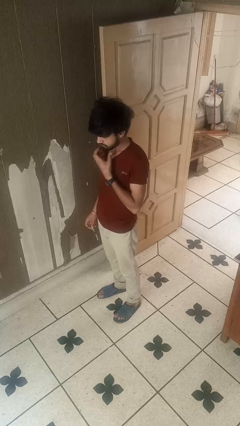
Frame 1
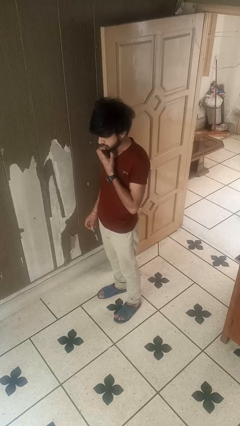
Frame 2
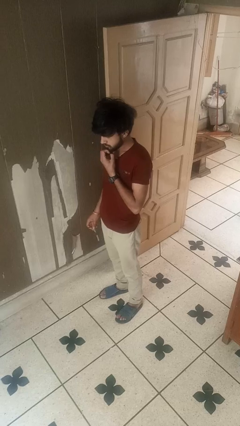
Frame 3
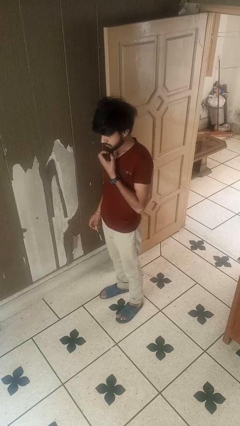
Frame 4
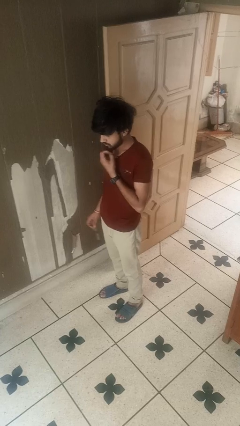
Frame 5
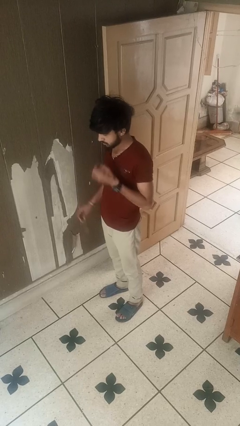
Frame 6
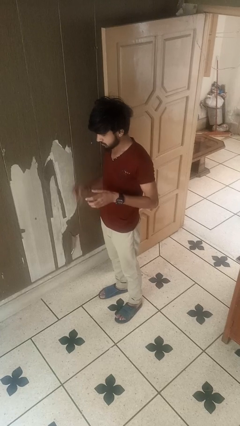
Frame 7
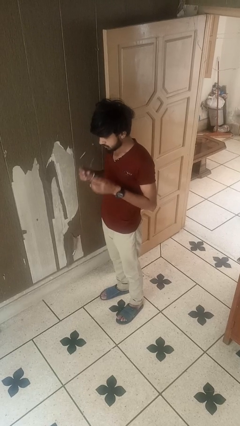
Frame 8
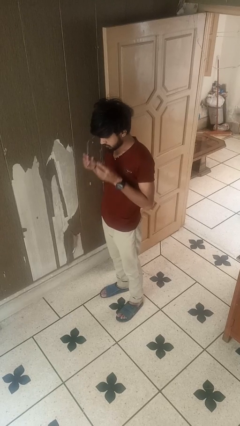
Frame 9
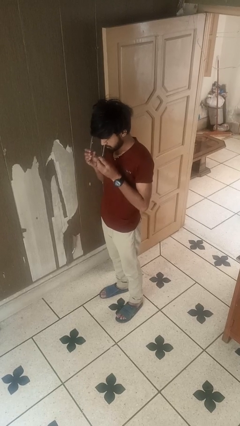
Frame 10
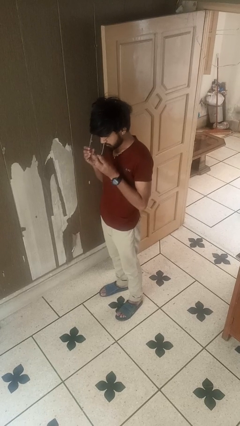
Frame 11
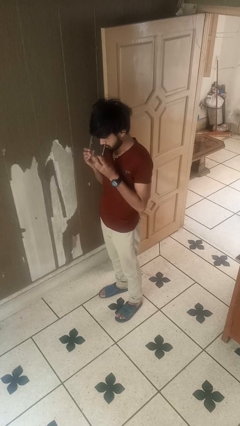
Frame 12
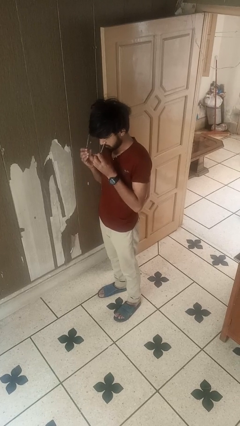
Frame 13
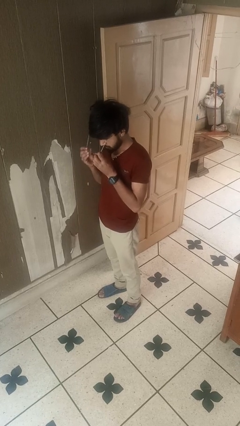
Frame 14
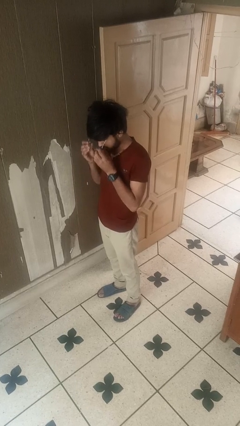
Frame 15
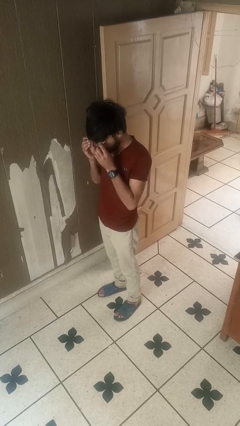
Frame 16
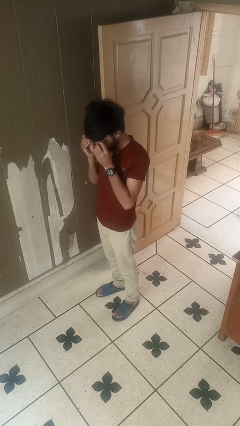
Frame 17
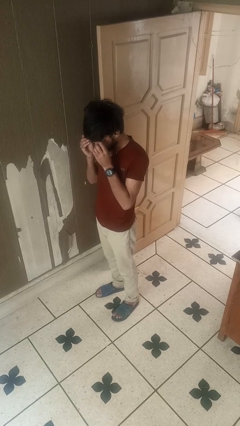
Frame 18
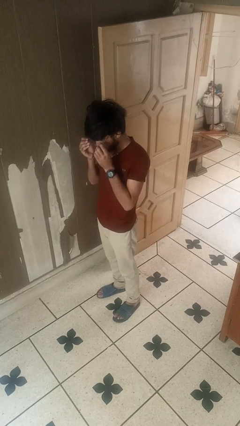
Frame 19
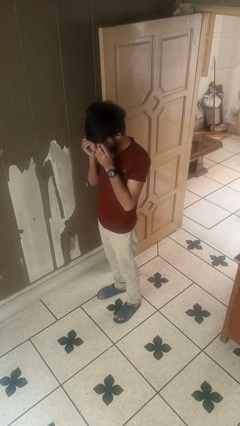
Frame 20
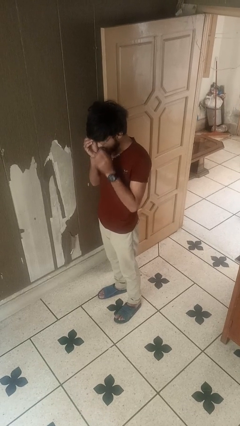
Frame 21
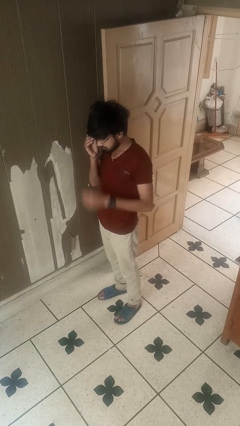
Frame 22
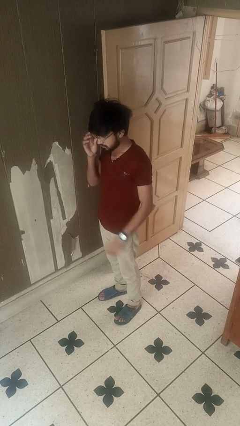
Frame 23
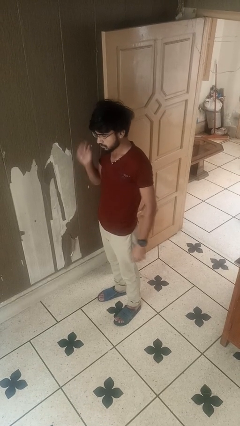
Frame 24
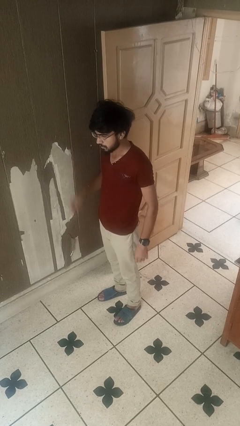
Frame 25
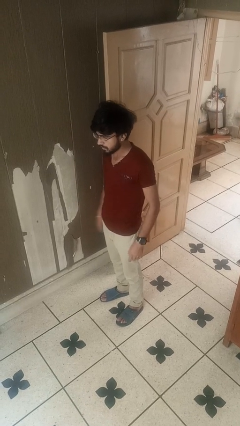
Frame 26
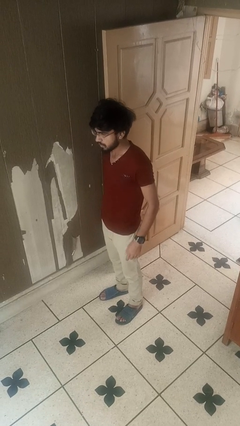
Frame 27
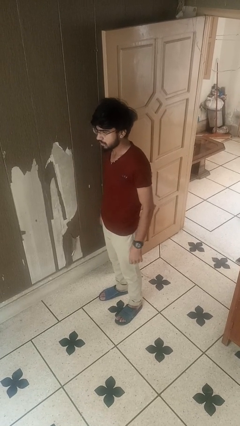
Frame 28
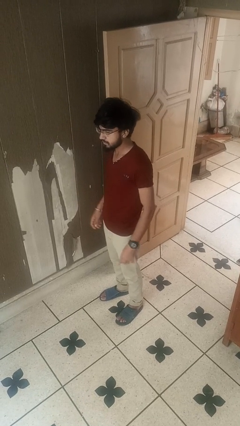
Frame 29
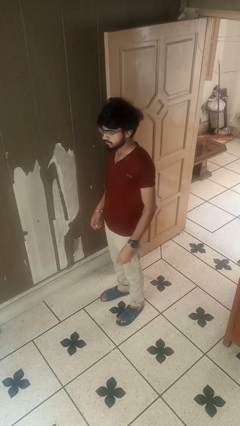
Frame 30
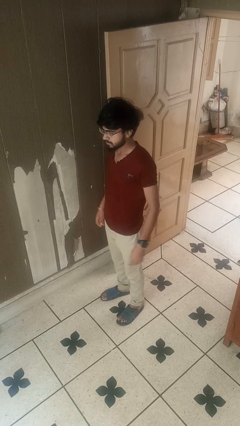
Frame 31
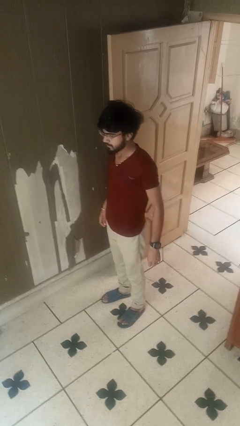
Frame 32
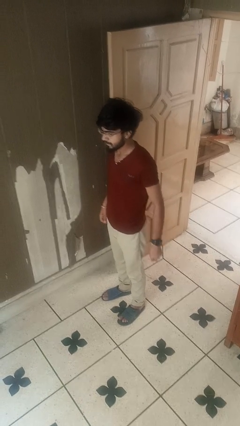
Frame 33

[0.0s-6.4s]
person puts on glasses

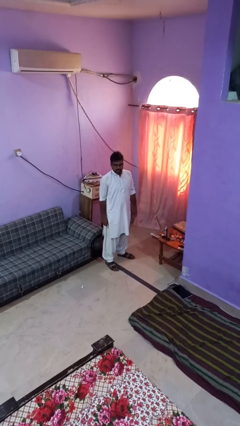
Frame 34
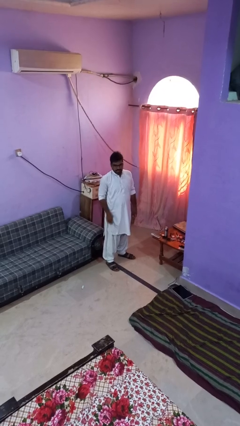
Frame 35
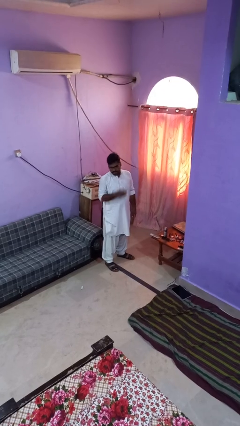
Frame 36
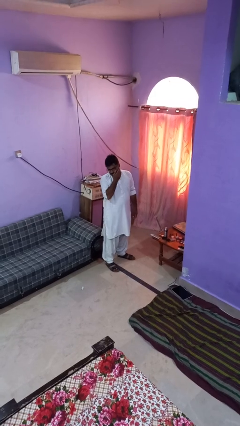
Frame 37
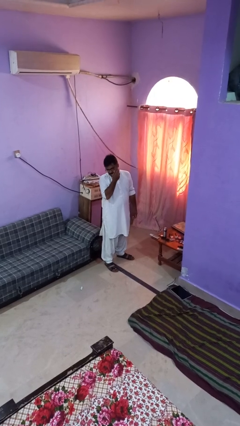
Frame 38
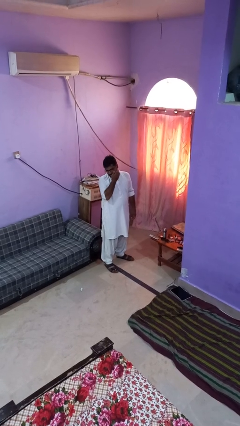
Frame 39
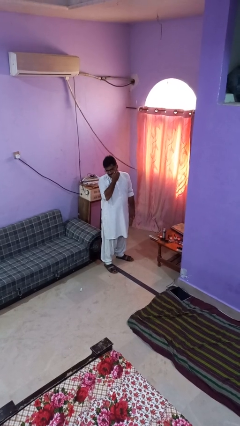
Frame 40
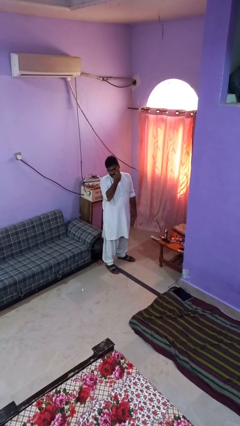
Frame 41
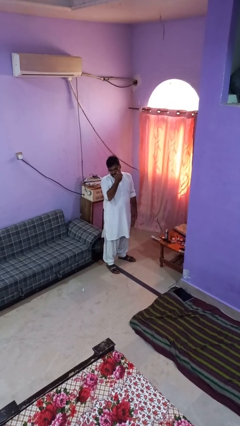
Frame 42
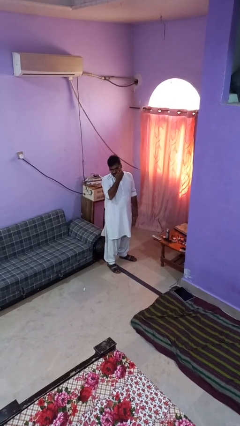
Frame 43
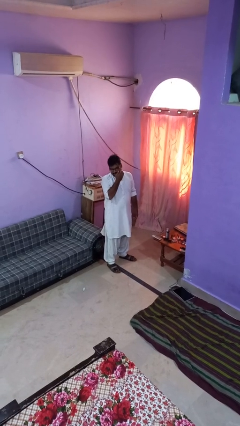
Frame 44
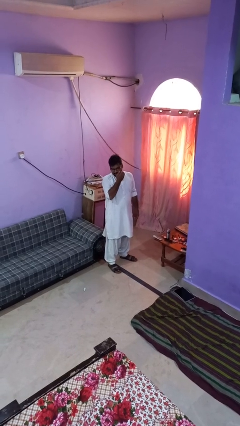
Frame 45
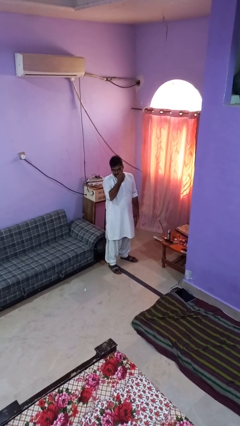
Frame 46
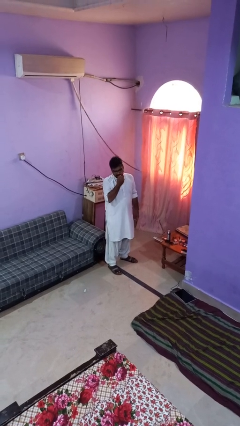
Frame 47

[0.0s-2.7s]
person scratches face

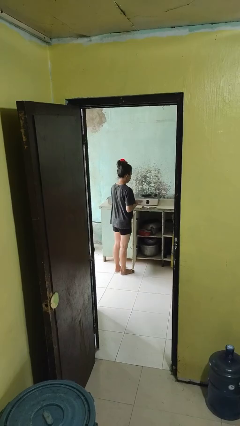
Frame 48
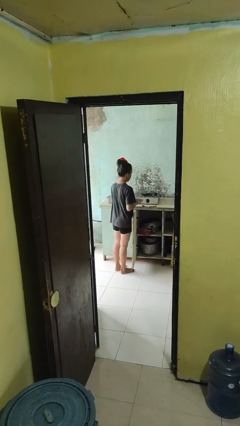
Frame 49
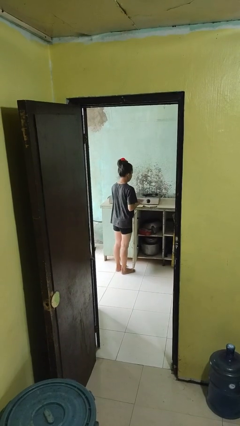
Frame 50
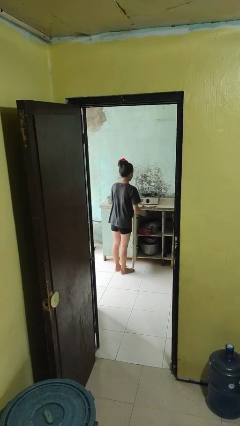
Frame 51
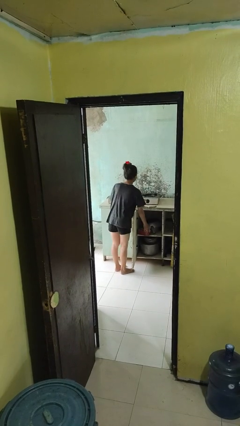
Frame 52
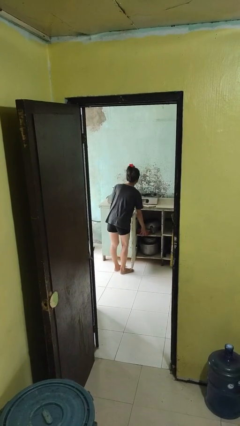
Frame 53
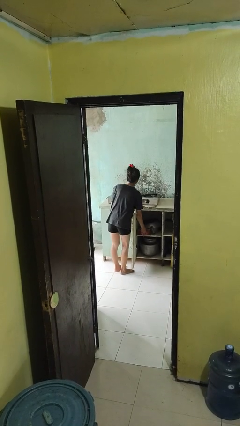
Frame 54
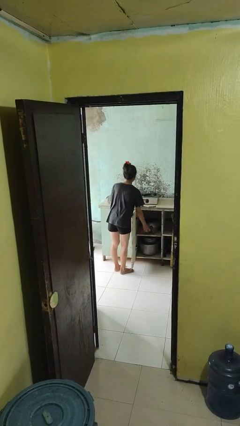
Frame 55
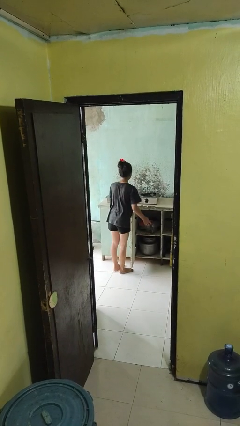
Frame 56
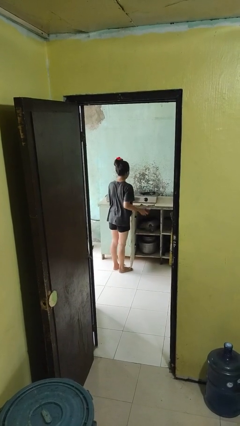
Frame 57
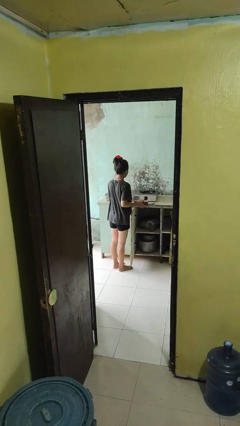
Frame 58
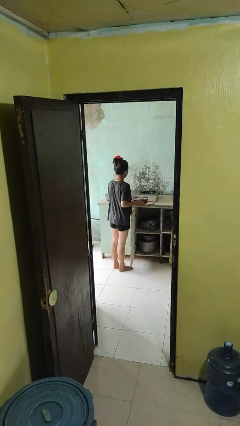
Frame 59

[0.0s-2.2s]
person takes object from cabinet

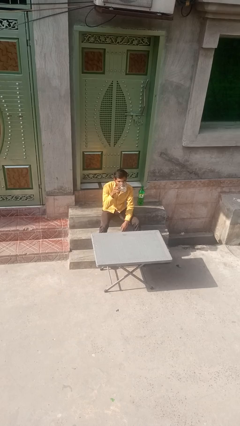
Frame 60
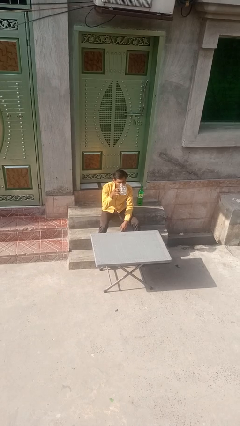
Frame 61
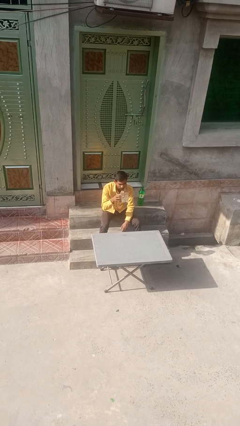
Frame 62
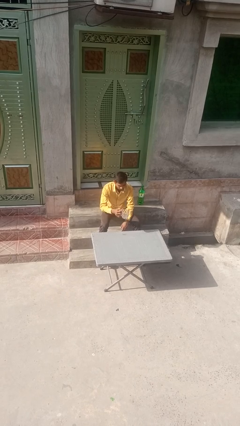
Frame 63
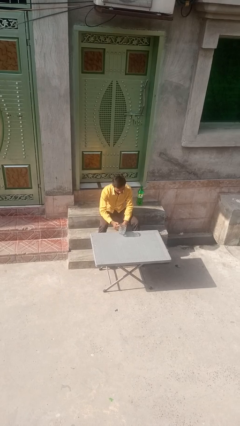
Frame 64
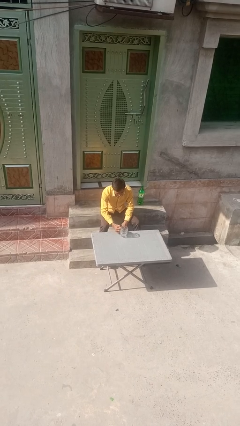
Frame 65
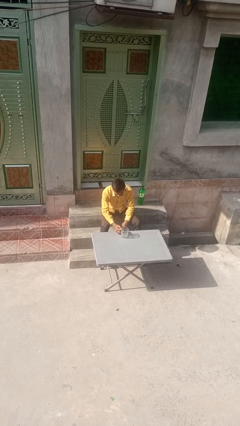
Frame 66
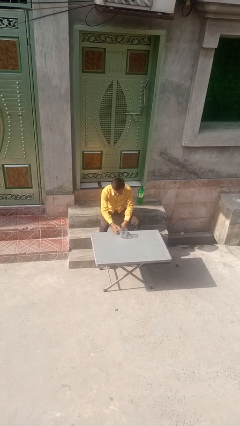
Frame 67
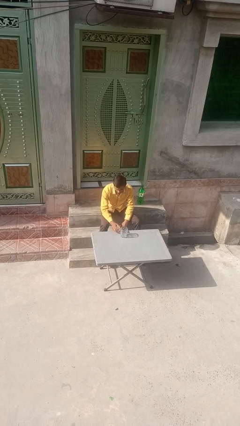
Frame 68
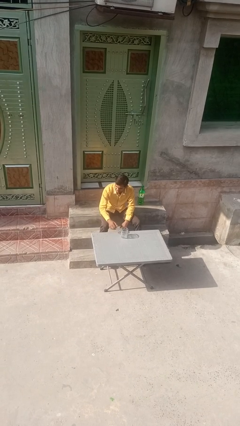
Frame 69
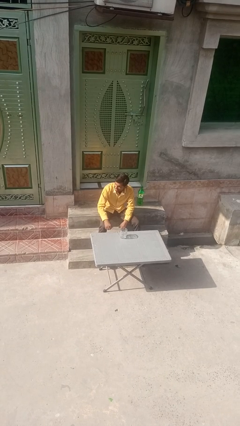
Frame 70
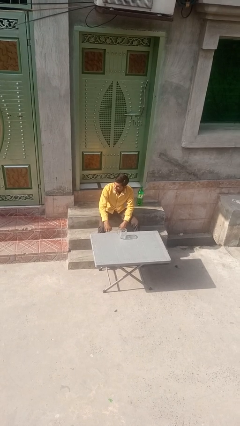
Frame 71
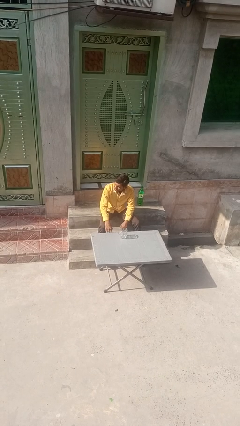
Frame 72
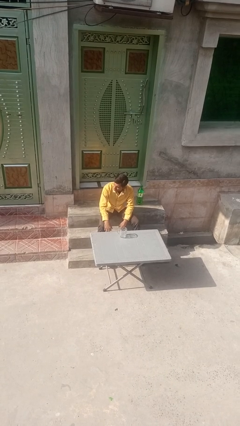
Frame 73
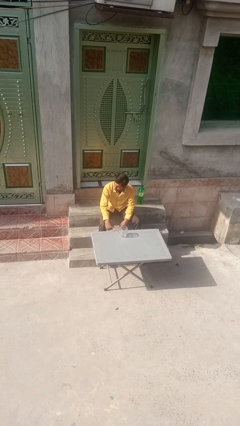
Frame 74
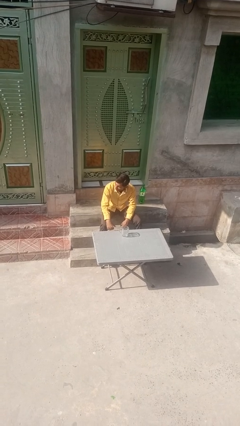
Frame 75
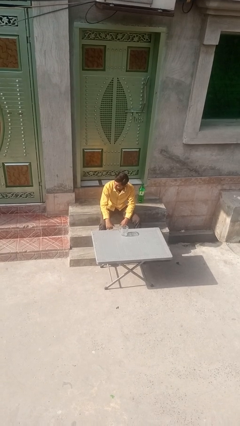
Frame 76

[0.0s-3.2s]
person puts down object on table

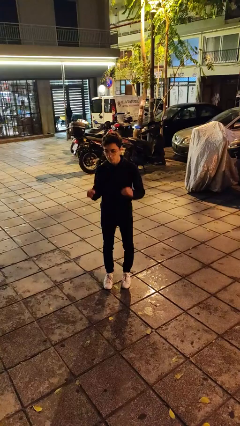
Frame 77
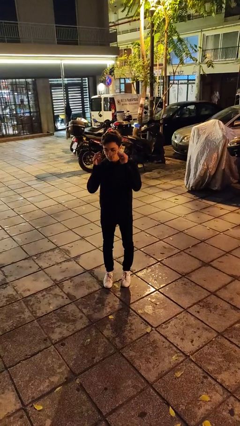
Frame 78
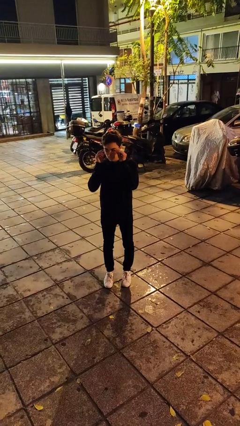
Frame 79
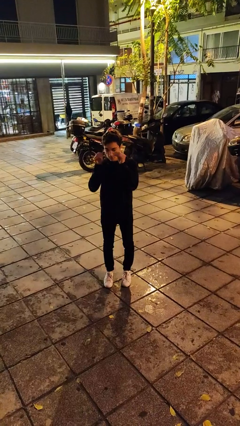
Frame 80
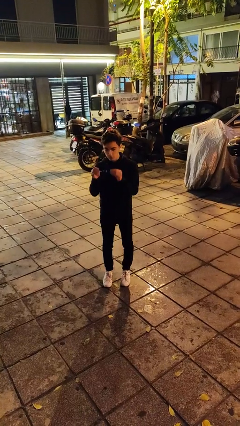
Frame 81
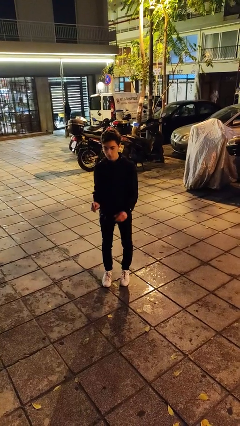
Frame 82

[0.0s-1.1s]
person takes off glasses

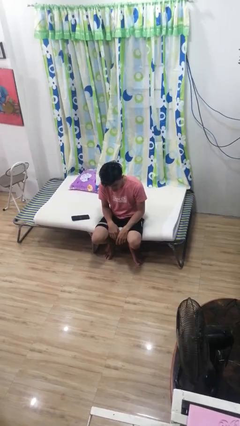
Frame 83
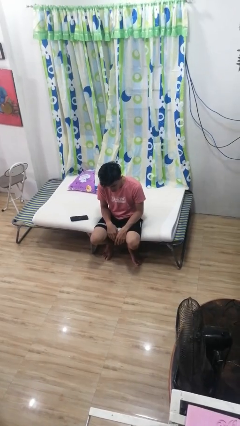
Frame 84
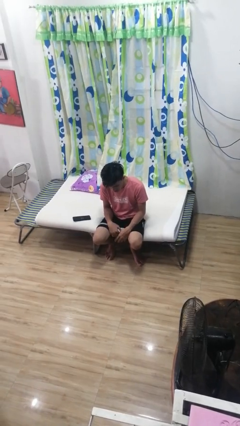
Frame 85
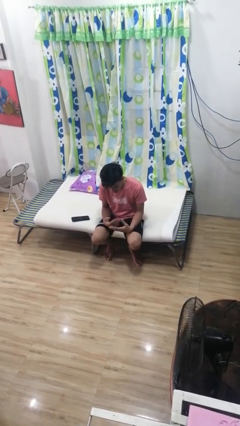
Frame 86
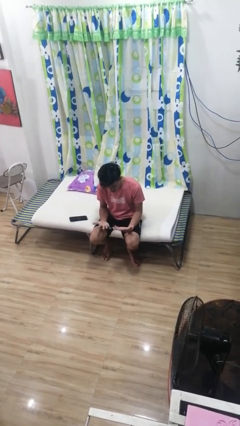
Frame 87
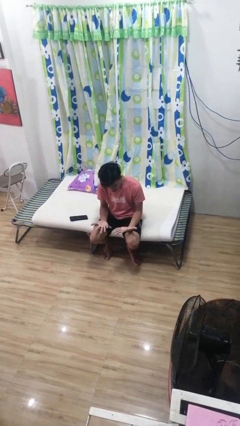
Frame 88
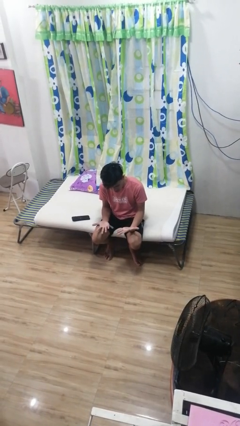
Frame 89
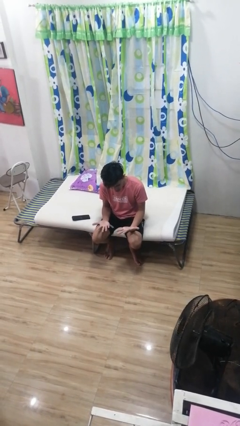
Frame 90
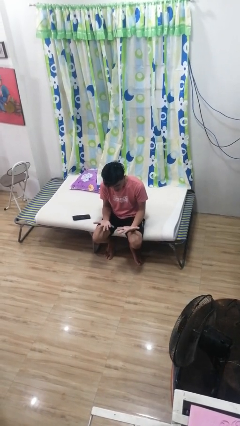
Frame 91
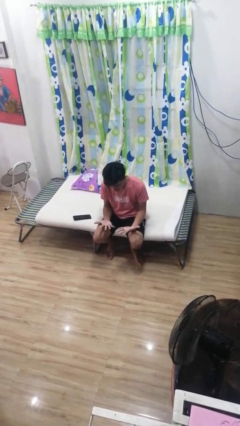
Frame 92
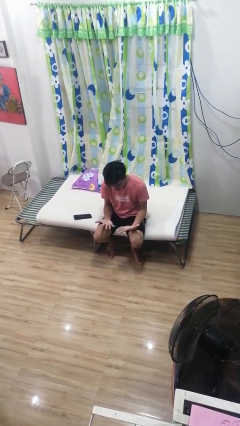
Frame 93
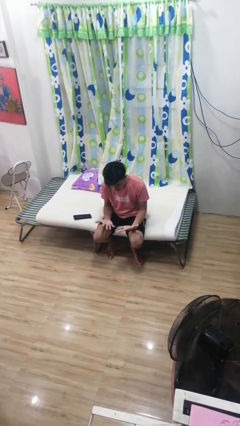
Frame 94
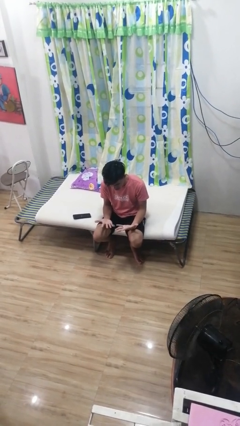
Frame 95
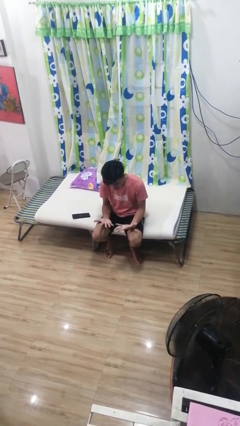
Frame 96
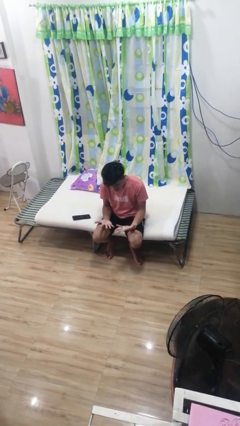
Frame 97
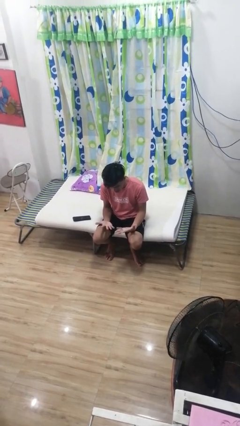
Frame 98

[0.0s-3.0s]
person looks at hands in lap
